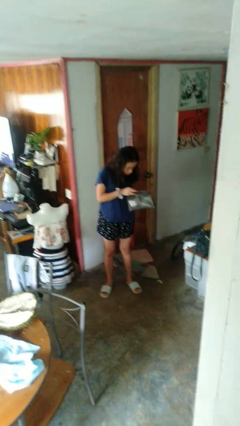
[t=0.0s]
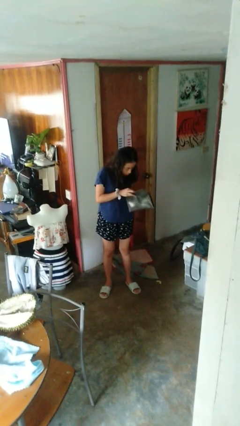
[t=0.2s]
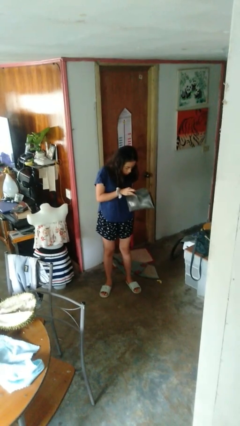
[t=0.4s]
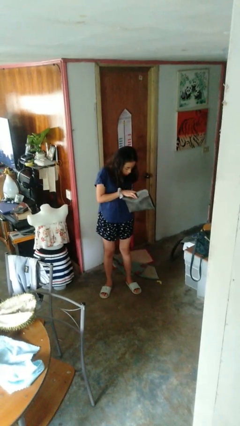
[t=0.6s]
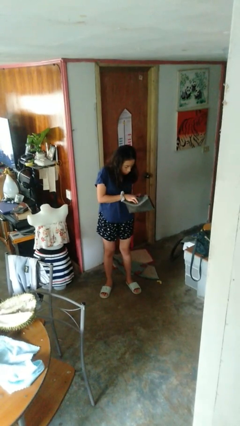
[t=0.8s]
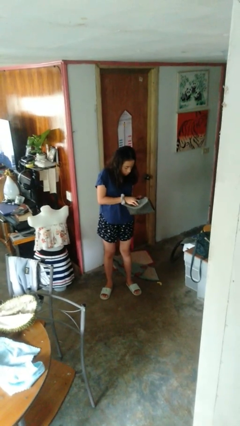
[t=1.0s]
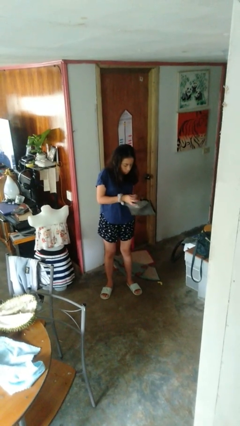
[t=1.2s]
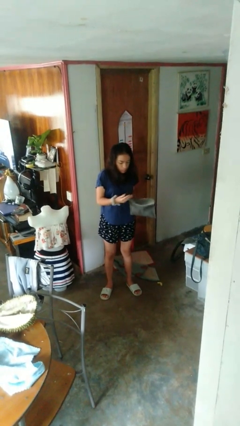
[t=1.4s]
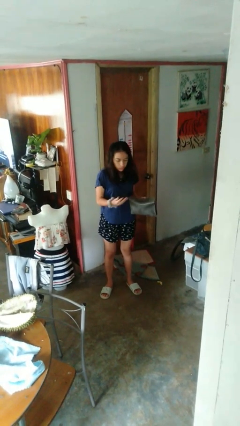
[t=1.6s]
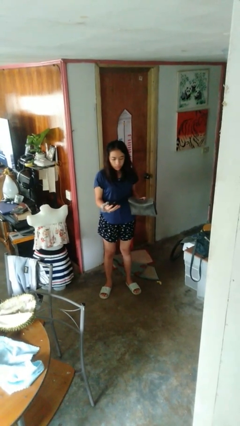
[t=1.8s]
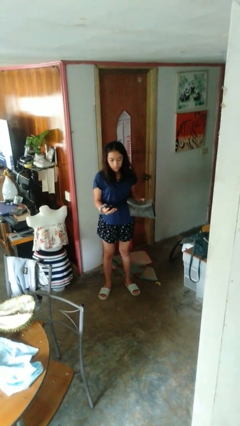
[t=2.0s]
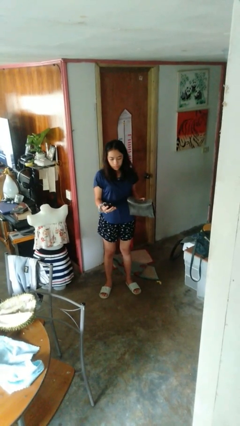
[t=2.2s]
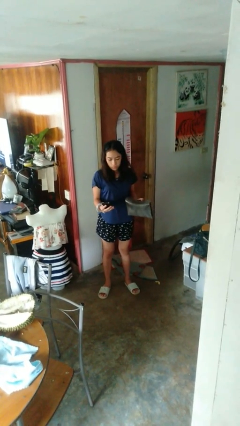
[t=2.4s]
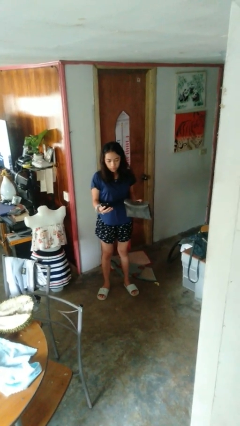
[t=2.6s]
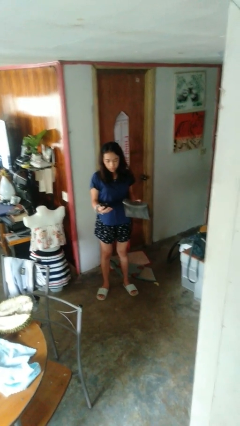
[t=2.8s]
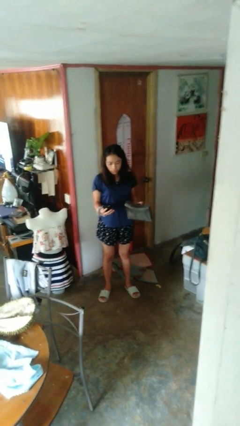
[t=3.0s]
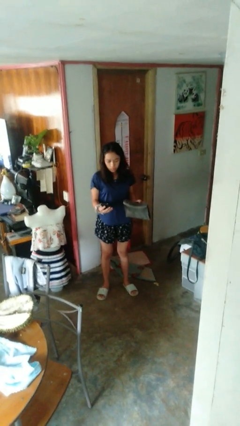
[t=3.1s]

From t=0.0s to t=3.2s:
person takes object from purse

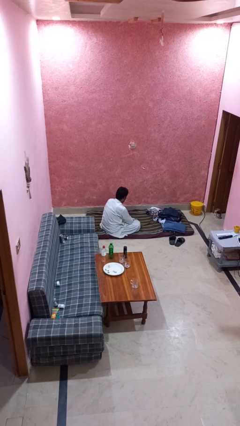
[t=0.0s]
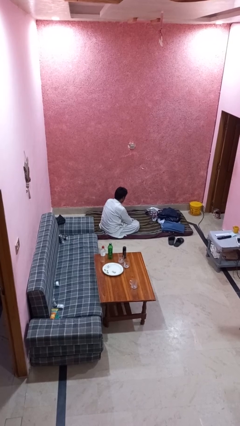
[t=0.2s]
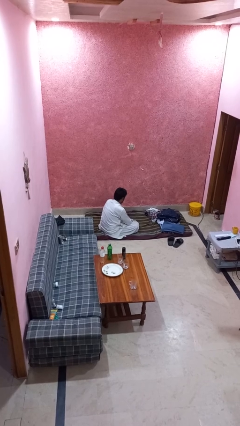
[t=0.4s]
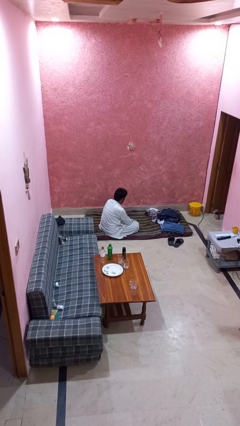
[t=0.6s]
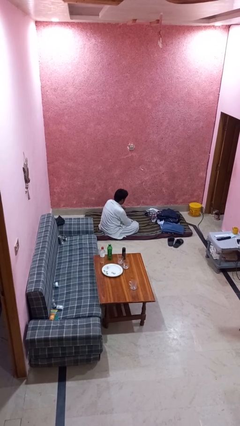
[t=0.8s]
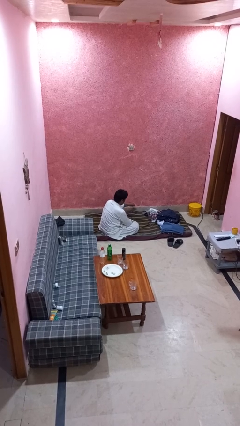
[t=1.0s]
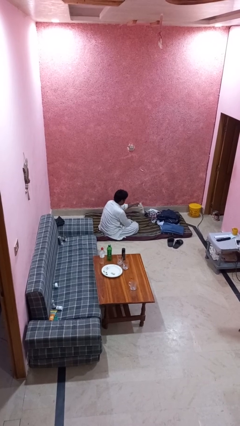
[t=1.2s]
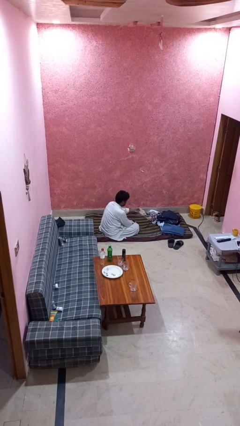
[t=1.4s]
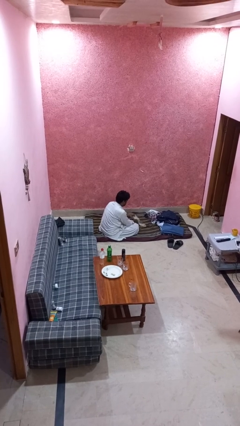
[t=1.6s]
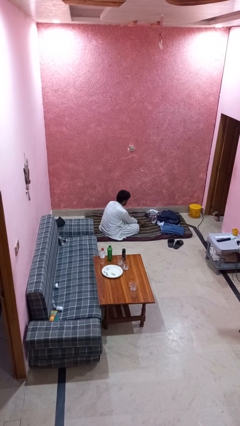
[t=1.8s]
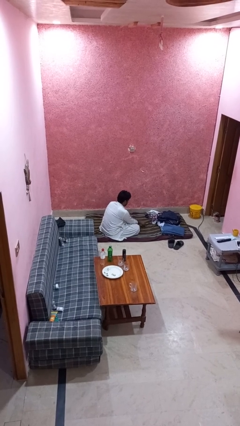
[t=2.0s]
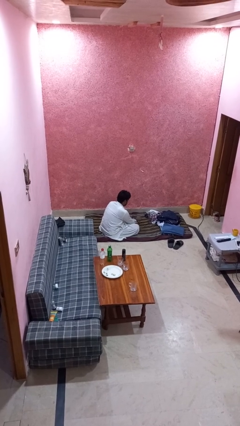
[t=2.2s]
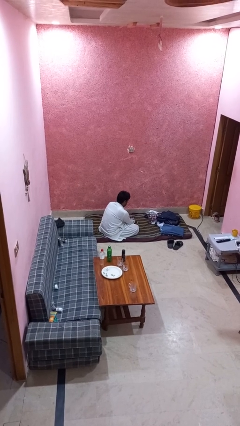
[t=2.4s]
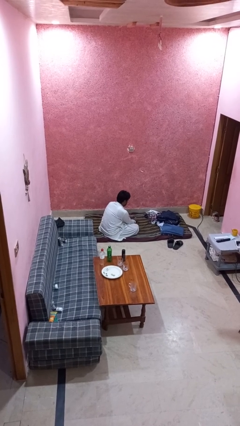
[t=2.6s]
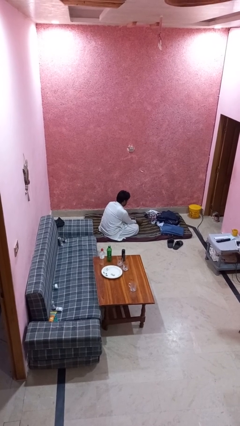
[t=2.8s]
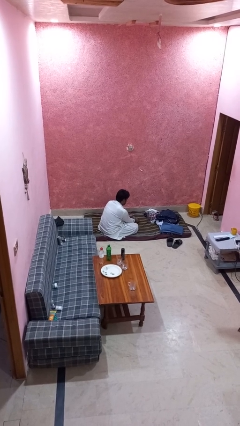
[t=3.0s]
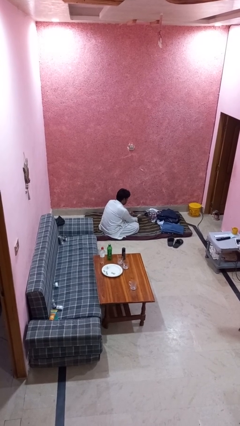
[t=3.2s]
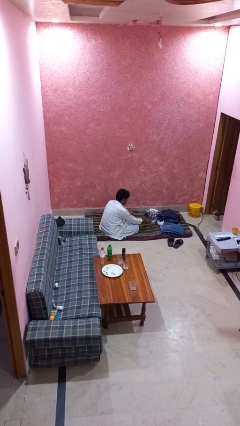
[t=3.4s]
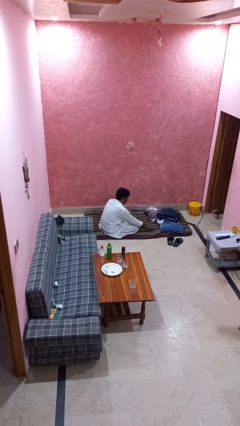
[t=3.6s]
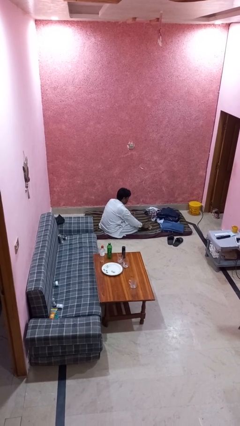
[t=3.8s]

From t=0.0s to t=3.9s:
person folds socks

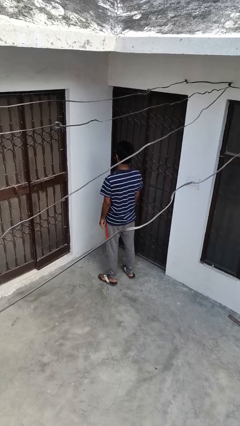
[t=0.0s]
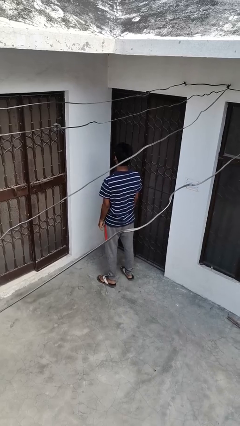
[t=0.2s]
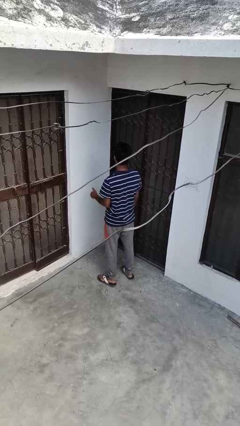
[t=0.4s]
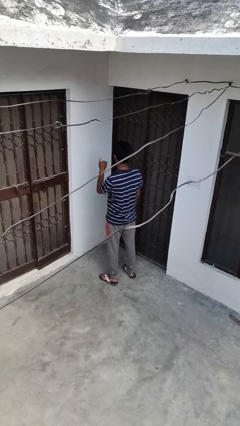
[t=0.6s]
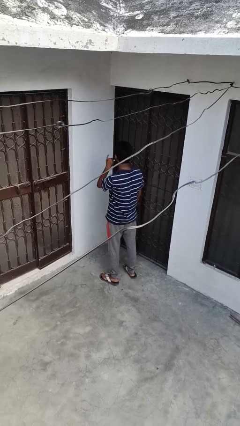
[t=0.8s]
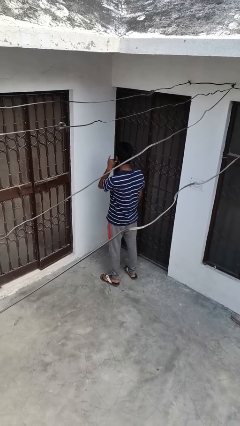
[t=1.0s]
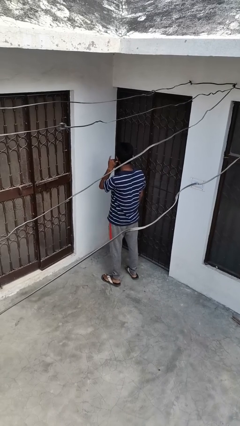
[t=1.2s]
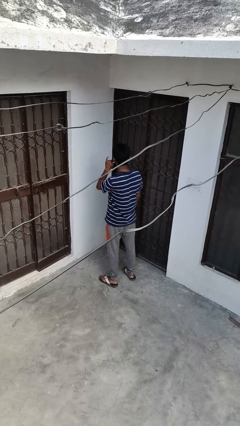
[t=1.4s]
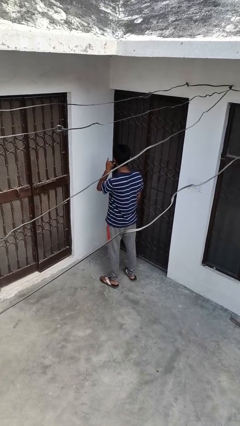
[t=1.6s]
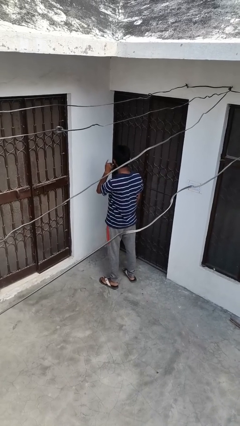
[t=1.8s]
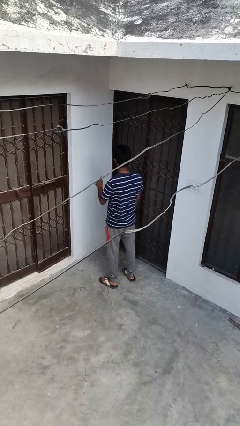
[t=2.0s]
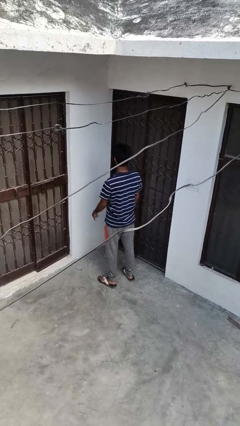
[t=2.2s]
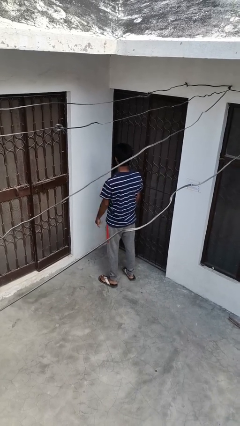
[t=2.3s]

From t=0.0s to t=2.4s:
person gestures call me

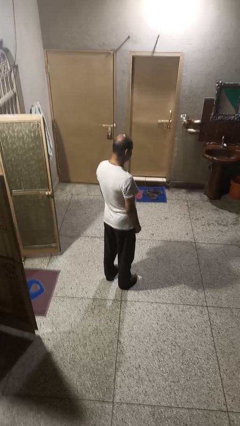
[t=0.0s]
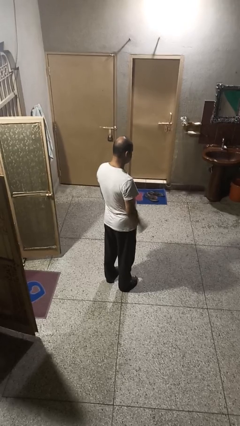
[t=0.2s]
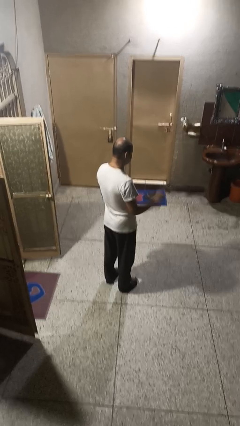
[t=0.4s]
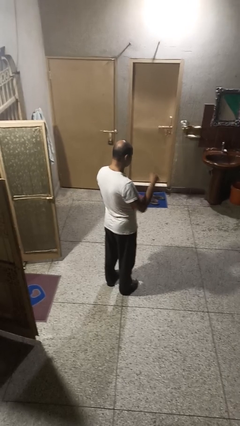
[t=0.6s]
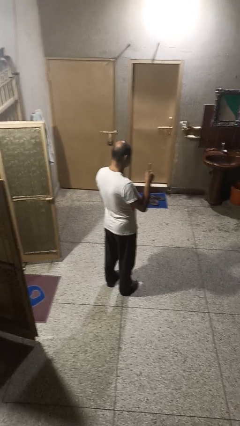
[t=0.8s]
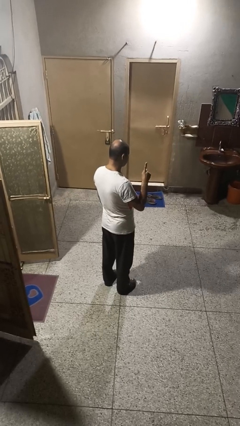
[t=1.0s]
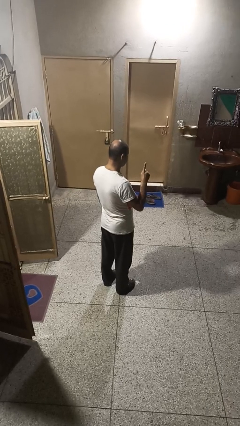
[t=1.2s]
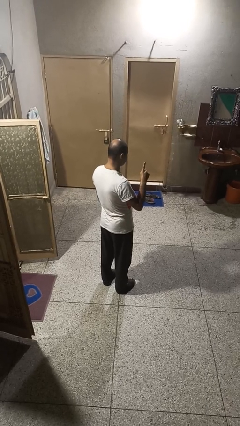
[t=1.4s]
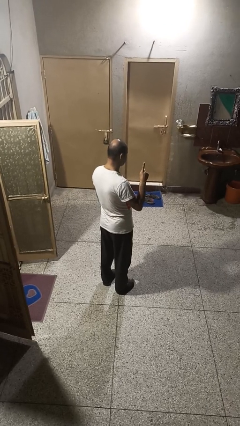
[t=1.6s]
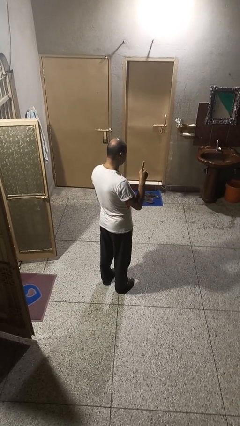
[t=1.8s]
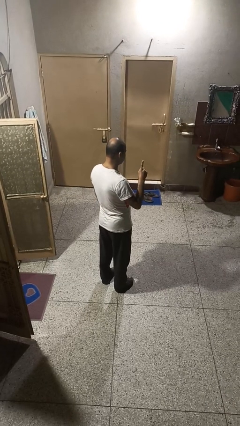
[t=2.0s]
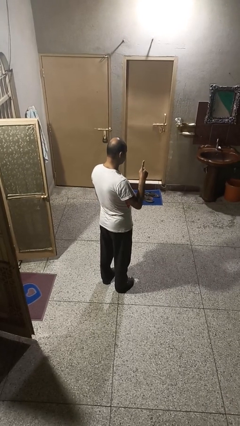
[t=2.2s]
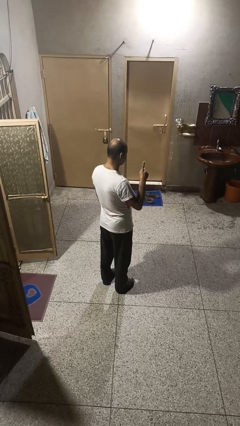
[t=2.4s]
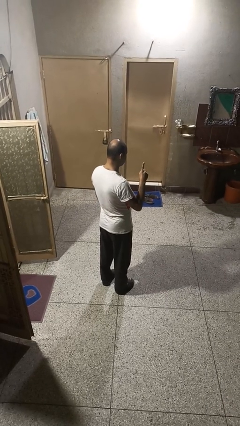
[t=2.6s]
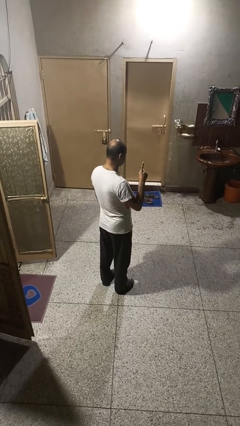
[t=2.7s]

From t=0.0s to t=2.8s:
person gestures number one

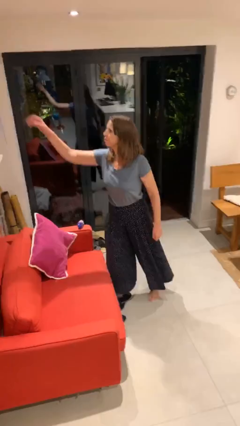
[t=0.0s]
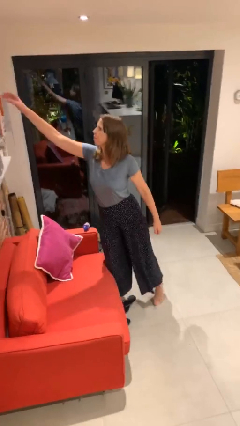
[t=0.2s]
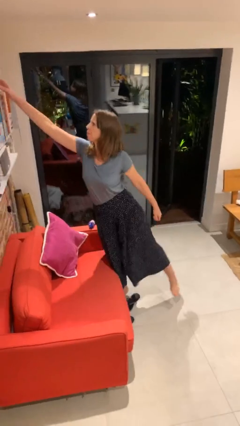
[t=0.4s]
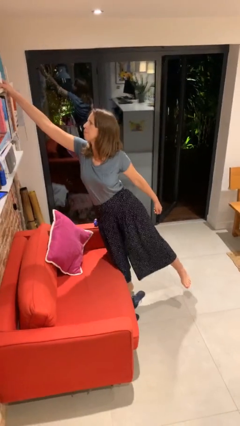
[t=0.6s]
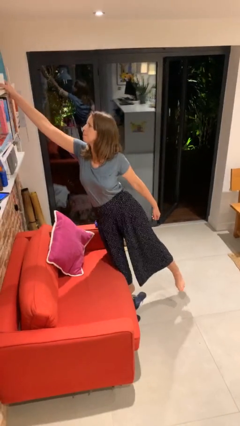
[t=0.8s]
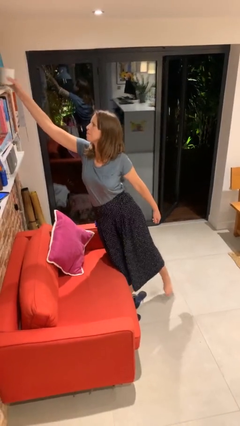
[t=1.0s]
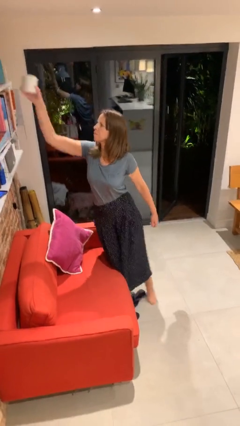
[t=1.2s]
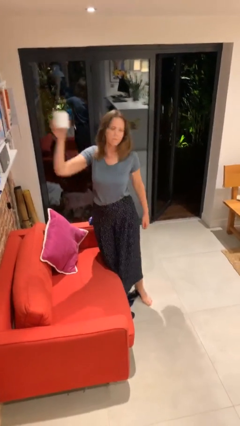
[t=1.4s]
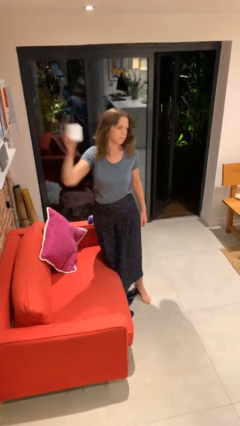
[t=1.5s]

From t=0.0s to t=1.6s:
person picks up object from shelf

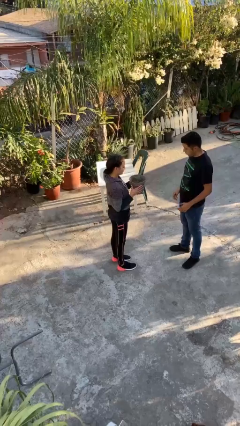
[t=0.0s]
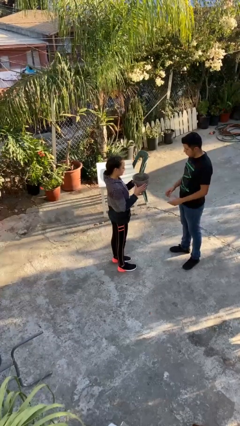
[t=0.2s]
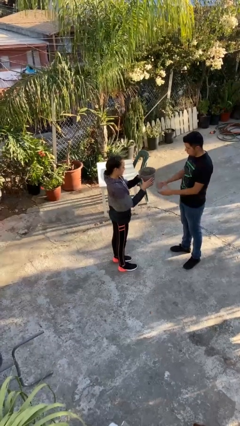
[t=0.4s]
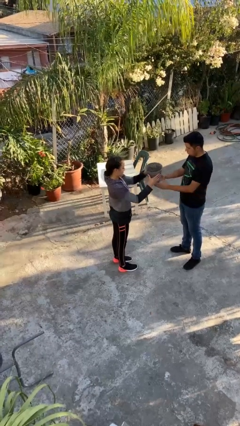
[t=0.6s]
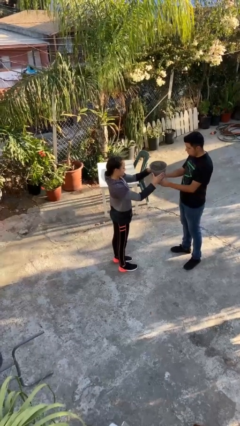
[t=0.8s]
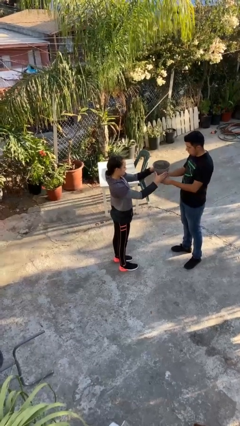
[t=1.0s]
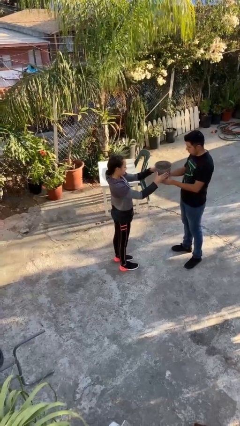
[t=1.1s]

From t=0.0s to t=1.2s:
person transfers object to person

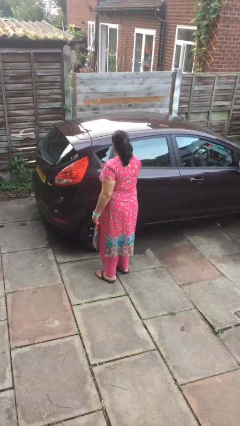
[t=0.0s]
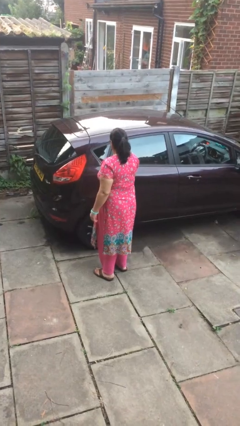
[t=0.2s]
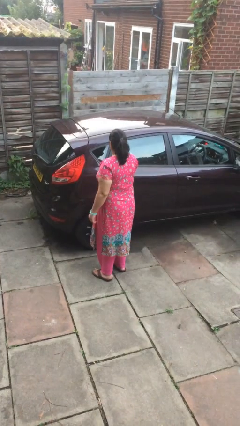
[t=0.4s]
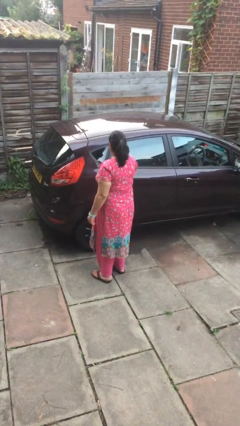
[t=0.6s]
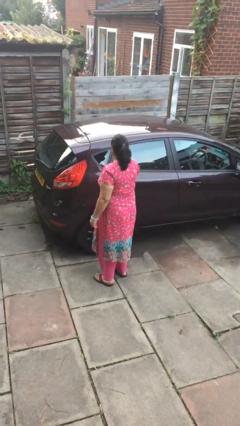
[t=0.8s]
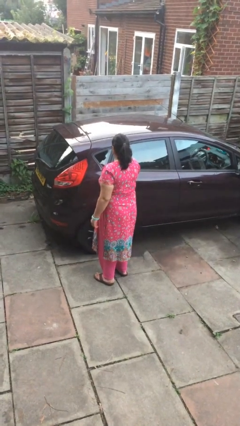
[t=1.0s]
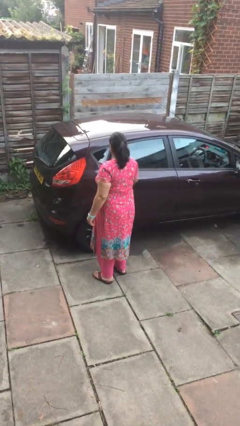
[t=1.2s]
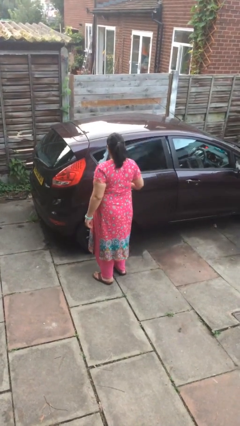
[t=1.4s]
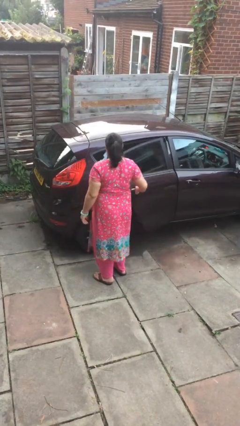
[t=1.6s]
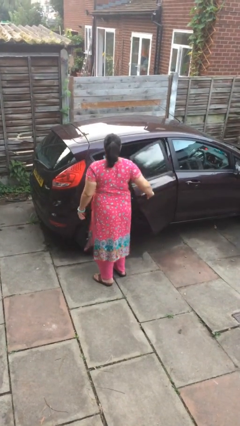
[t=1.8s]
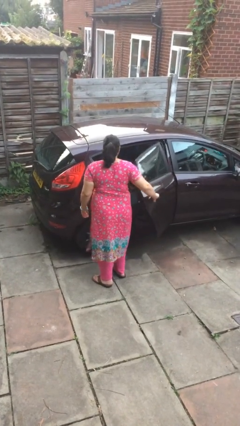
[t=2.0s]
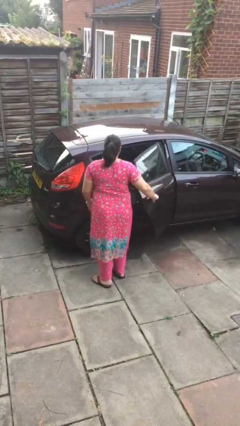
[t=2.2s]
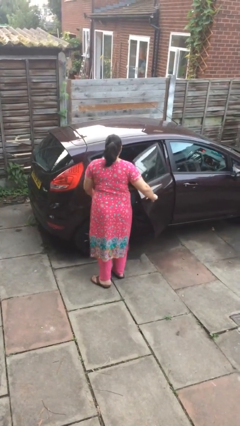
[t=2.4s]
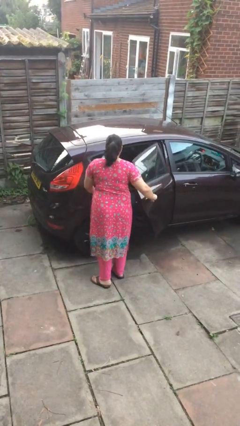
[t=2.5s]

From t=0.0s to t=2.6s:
person opens car door
